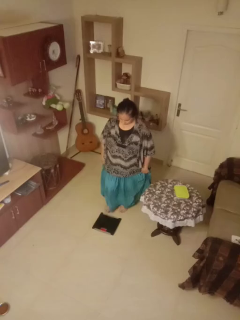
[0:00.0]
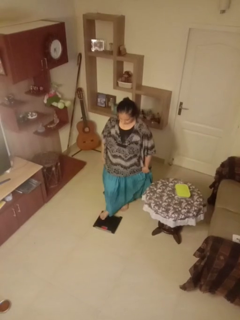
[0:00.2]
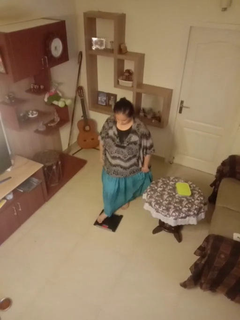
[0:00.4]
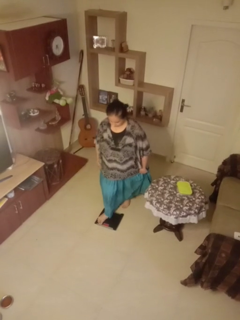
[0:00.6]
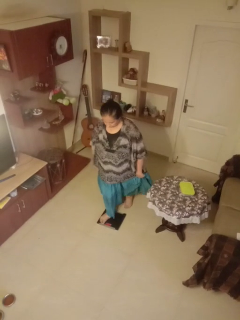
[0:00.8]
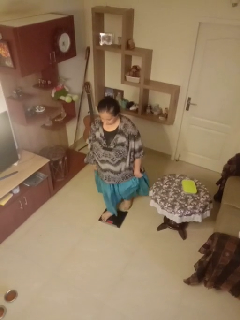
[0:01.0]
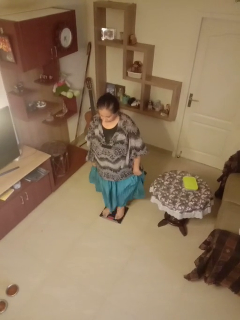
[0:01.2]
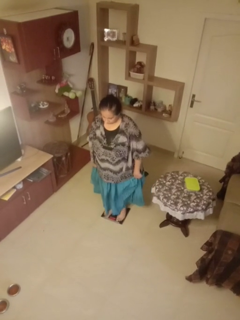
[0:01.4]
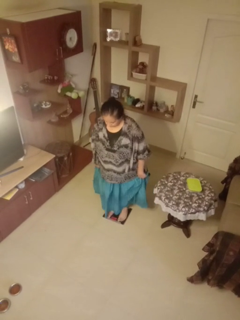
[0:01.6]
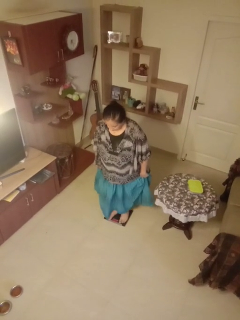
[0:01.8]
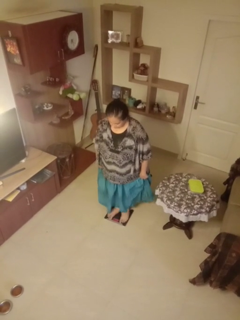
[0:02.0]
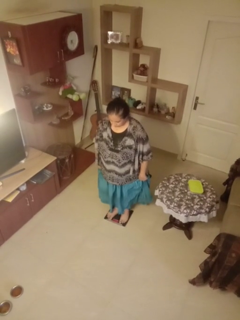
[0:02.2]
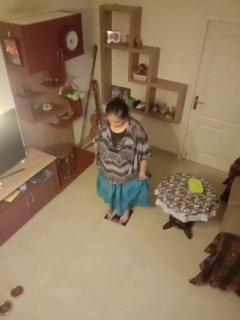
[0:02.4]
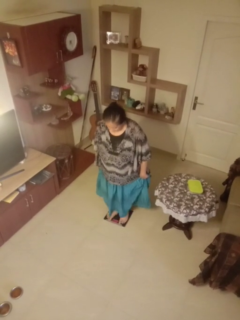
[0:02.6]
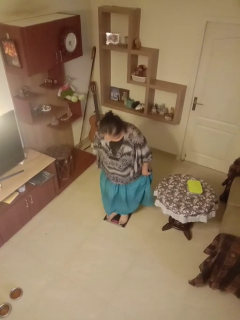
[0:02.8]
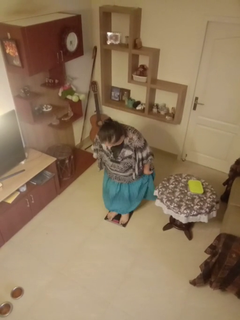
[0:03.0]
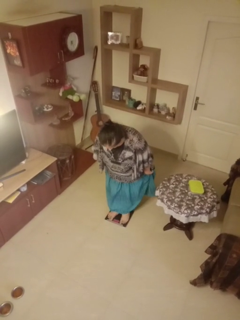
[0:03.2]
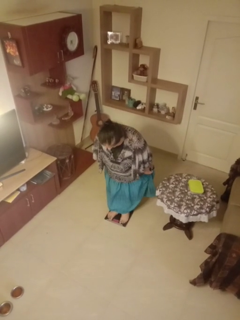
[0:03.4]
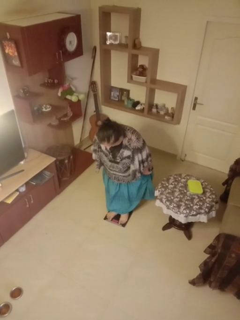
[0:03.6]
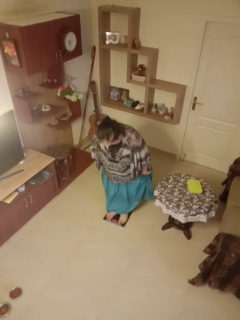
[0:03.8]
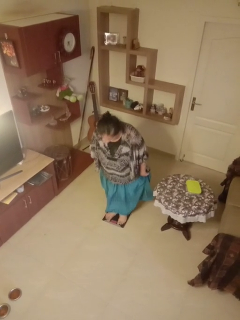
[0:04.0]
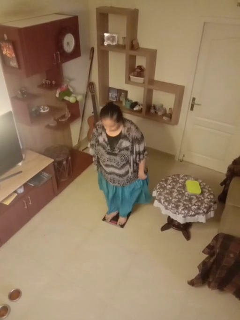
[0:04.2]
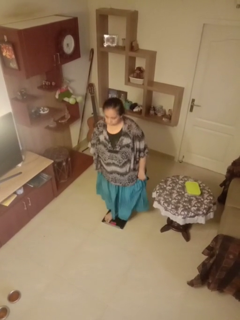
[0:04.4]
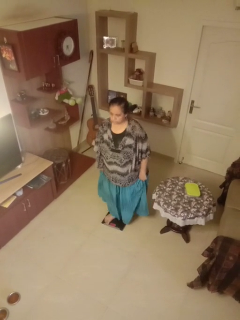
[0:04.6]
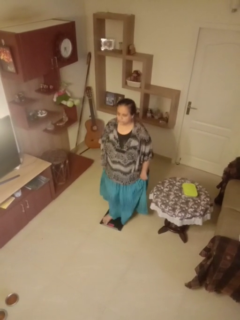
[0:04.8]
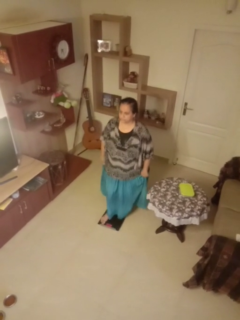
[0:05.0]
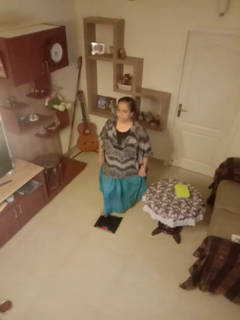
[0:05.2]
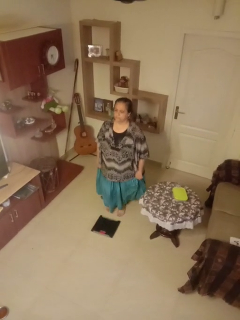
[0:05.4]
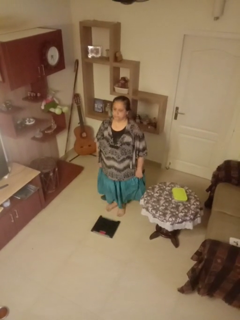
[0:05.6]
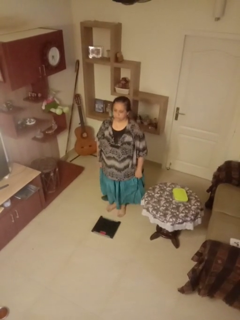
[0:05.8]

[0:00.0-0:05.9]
person uses bodyweight scale

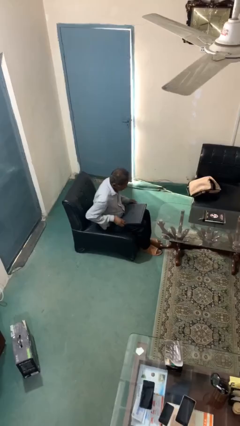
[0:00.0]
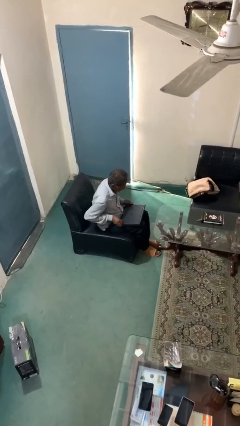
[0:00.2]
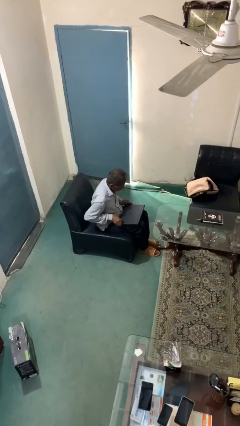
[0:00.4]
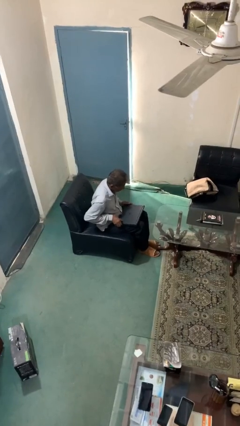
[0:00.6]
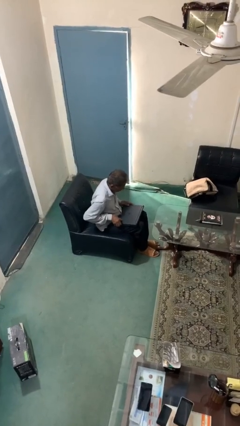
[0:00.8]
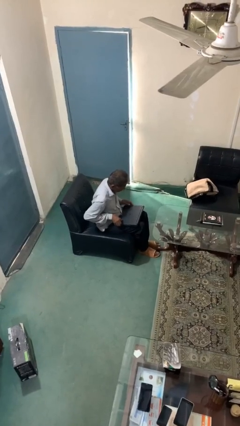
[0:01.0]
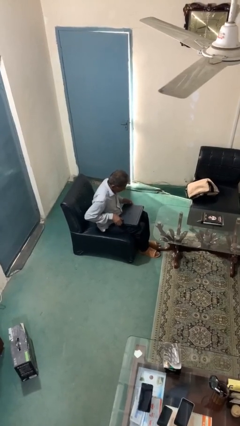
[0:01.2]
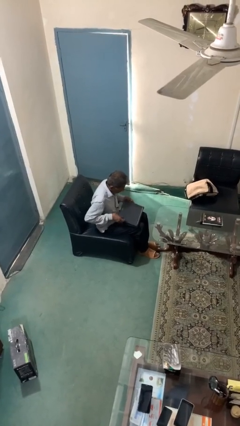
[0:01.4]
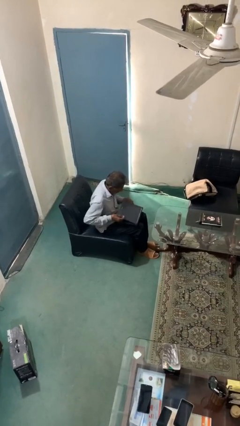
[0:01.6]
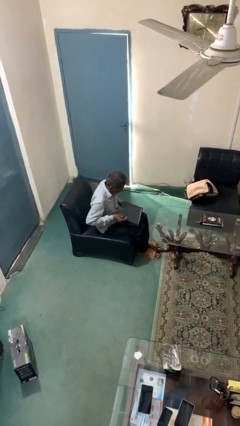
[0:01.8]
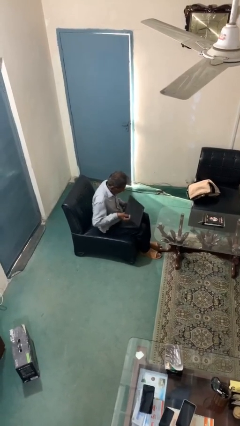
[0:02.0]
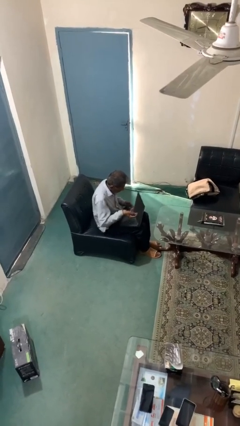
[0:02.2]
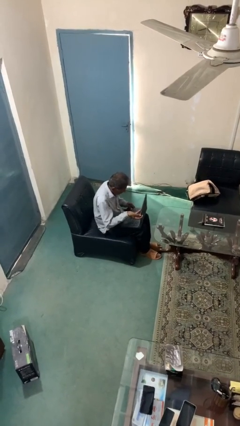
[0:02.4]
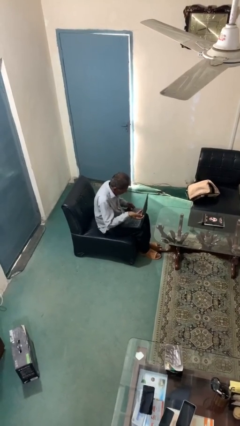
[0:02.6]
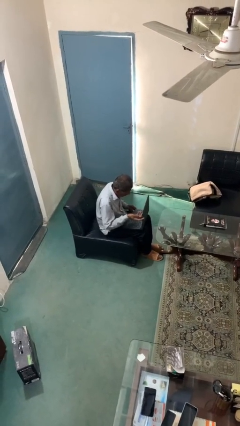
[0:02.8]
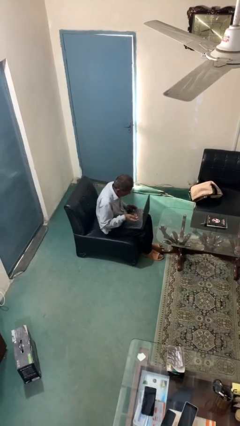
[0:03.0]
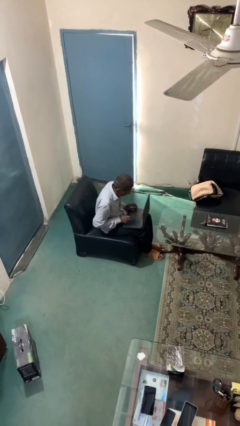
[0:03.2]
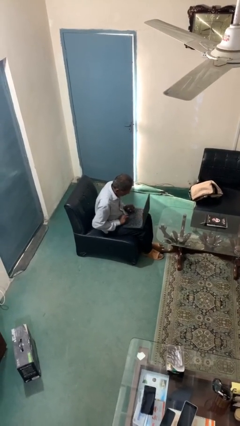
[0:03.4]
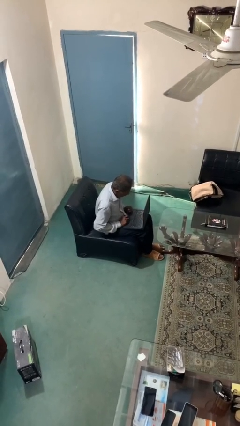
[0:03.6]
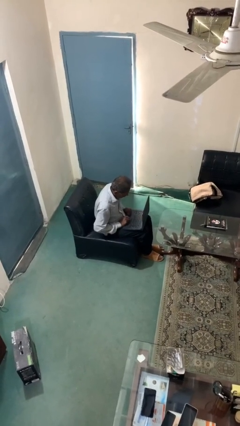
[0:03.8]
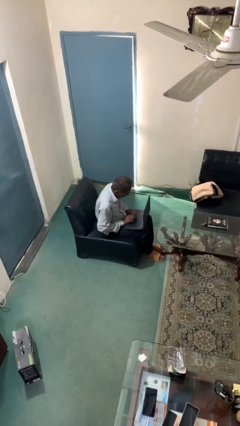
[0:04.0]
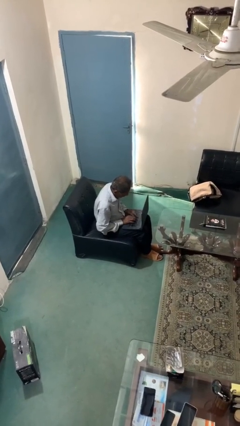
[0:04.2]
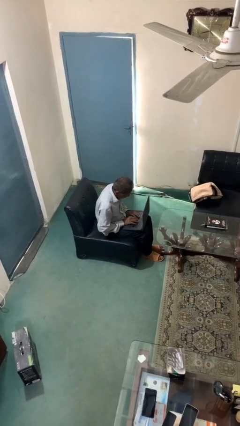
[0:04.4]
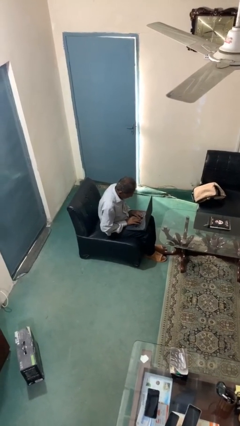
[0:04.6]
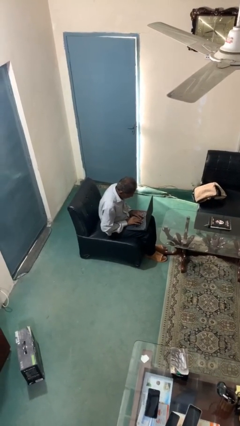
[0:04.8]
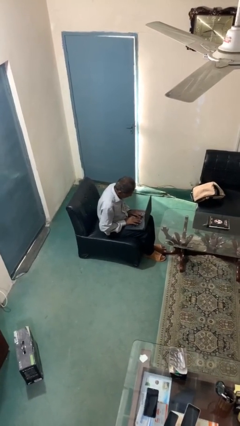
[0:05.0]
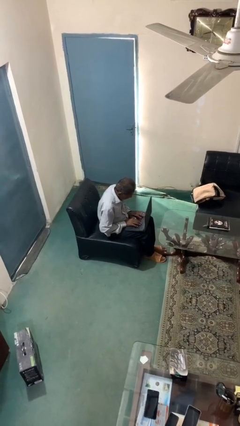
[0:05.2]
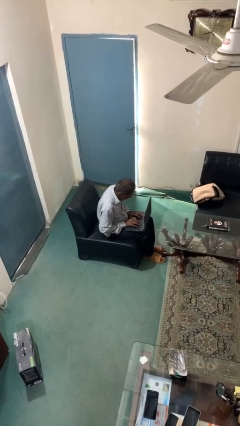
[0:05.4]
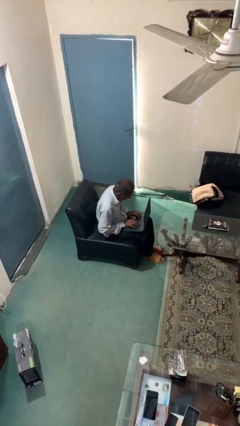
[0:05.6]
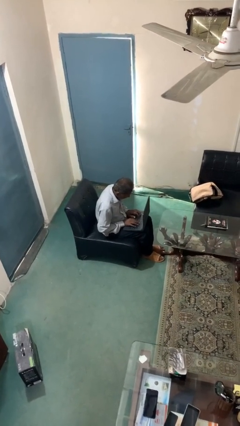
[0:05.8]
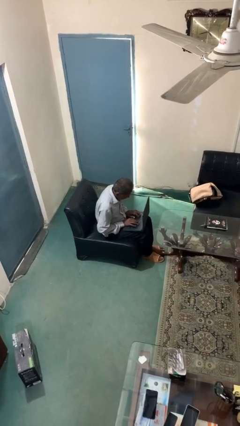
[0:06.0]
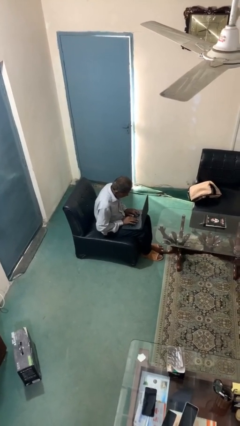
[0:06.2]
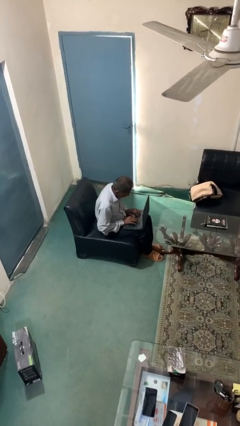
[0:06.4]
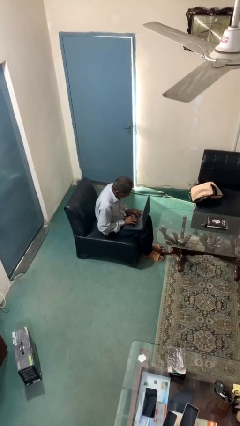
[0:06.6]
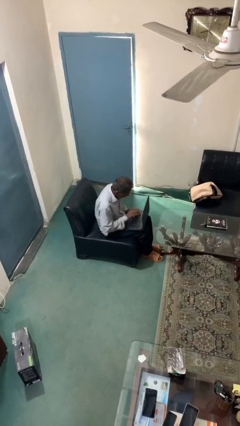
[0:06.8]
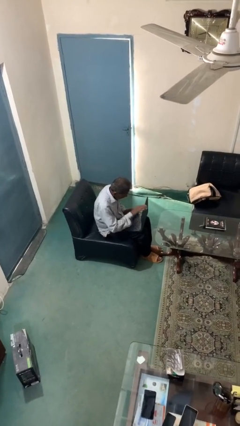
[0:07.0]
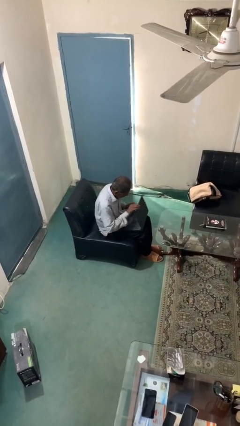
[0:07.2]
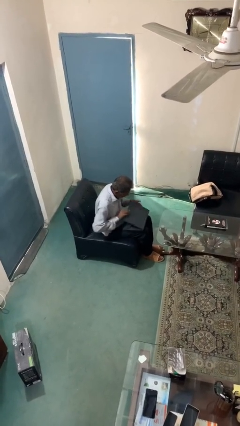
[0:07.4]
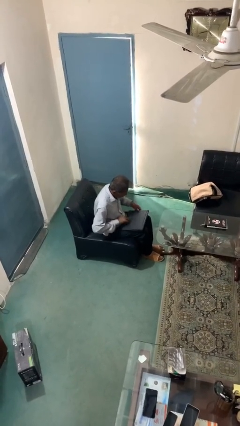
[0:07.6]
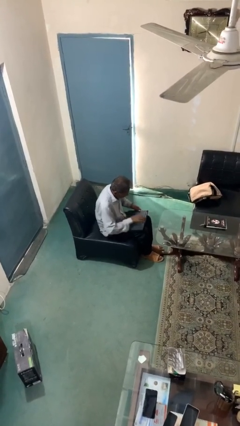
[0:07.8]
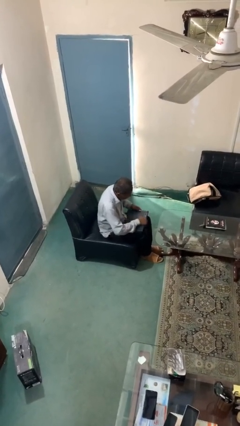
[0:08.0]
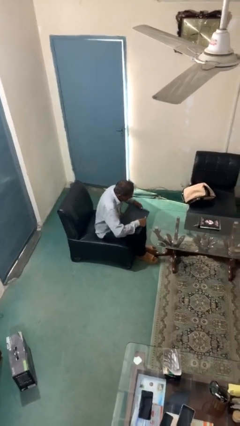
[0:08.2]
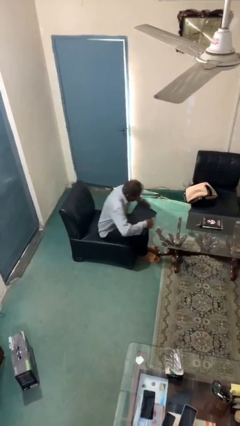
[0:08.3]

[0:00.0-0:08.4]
person interacts with laptop

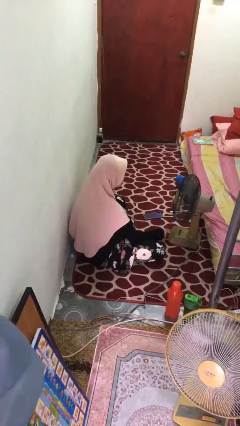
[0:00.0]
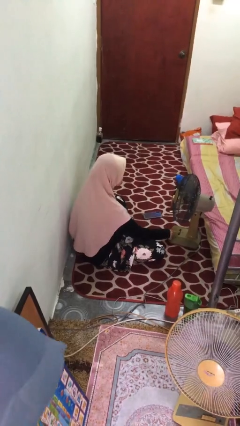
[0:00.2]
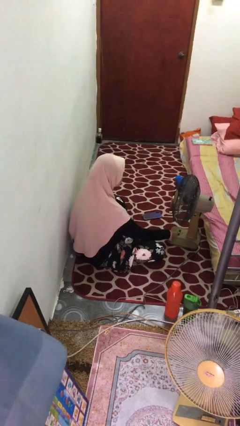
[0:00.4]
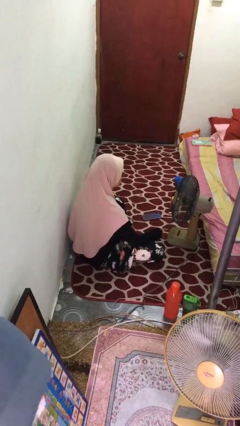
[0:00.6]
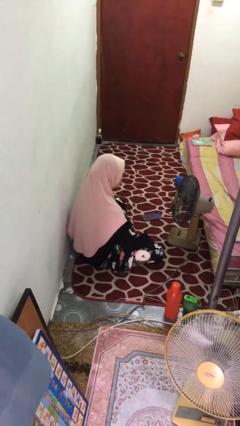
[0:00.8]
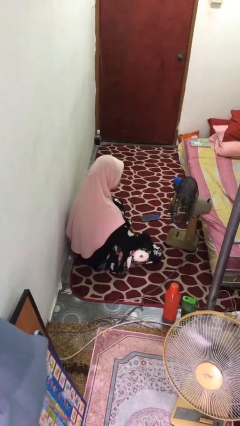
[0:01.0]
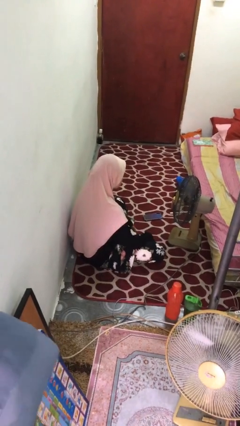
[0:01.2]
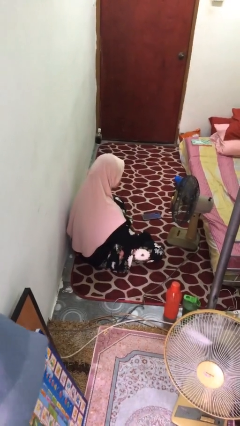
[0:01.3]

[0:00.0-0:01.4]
person turns on fan

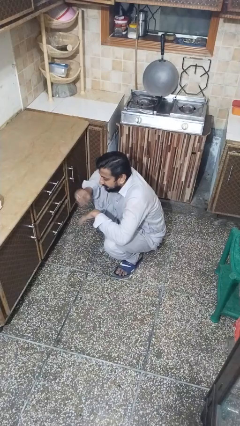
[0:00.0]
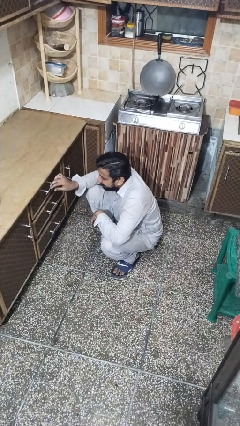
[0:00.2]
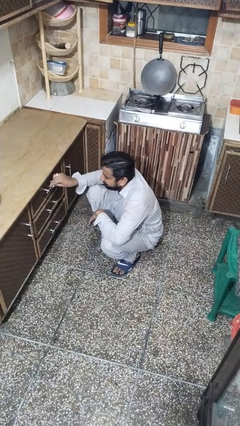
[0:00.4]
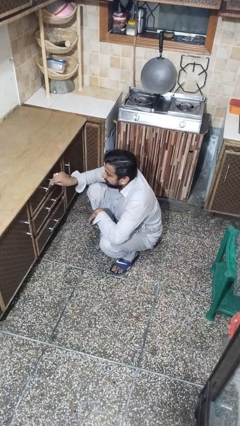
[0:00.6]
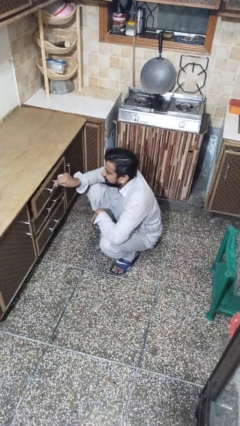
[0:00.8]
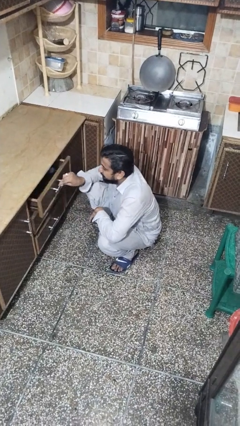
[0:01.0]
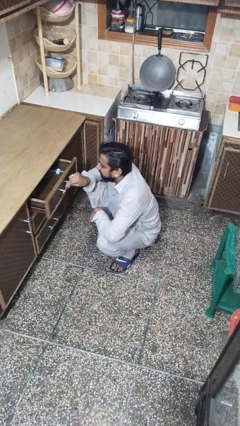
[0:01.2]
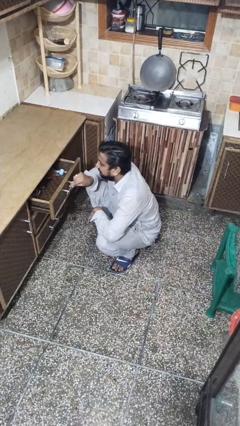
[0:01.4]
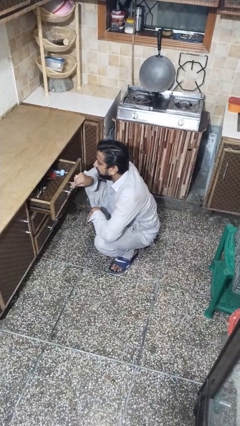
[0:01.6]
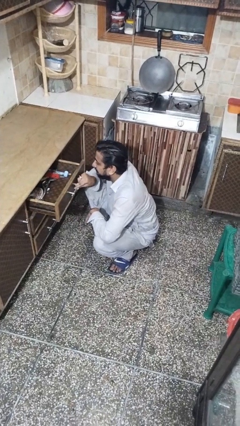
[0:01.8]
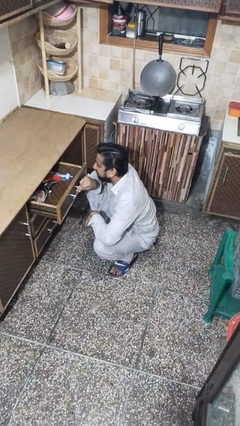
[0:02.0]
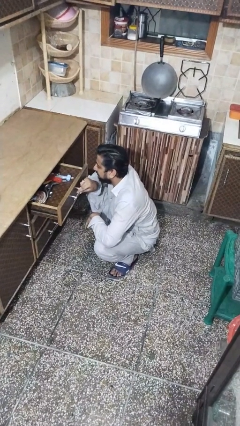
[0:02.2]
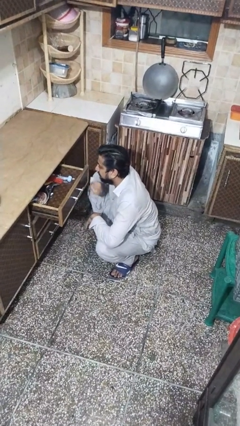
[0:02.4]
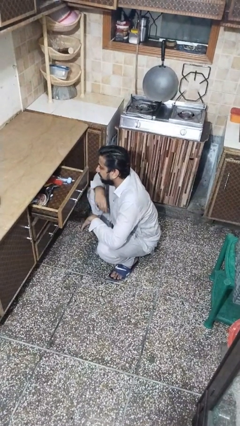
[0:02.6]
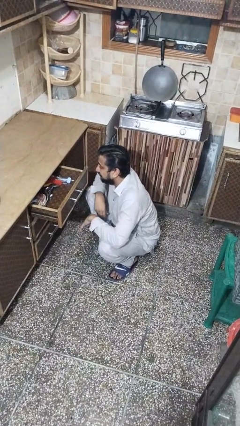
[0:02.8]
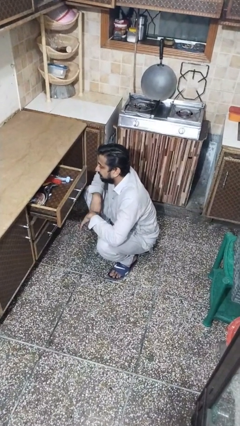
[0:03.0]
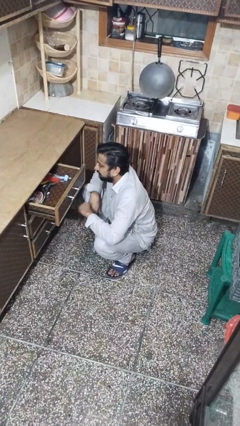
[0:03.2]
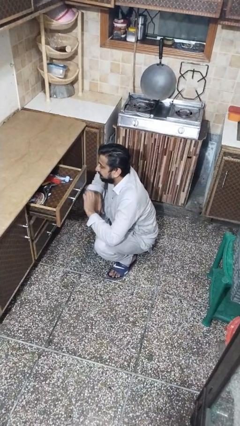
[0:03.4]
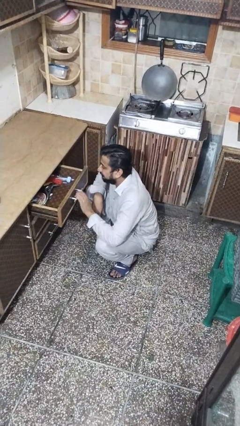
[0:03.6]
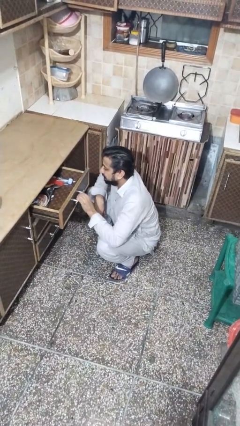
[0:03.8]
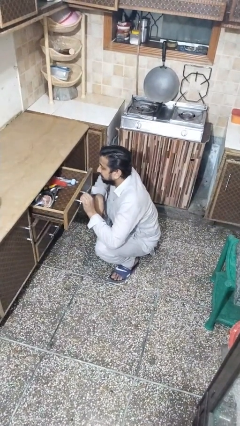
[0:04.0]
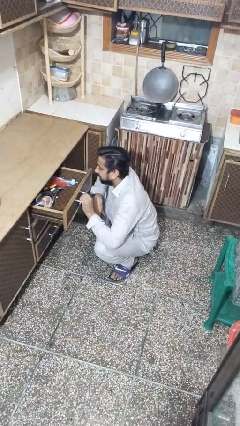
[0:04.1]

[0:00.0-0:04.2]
person opens kitchen drawer
